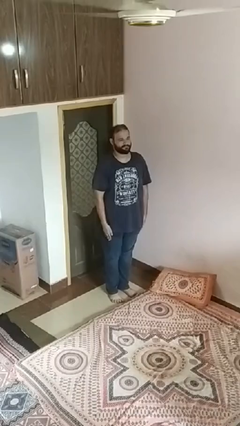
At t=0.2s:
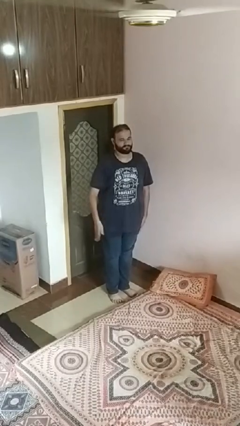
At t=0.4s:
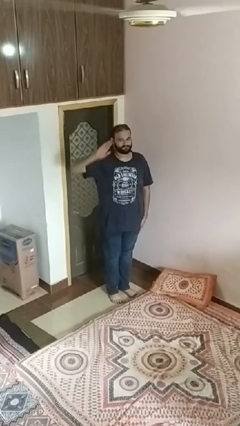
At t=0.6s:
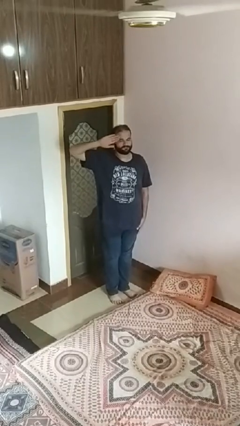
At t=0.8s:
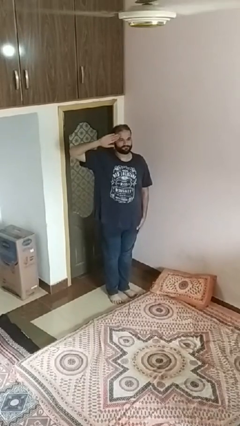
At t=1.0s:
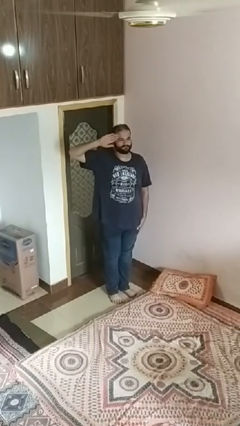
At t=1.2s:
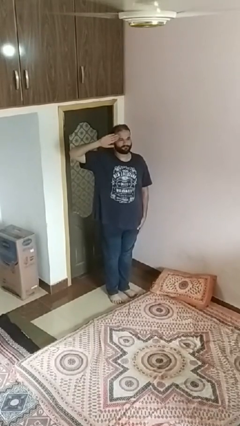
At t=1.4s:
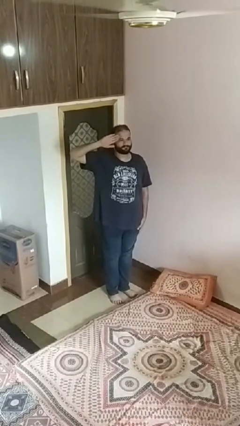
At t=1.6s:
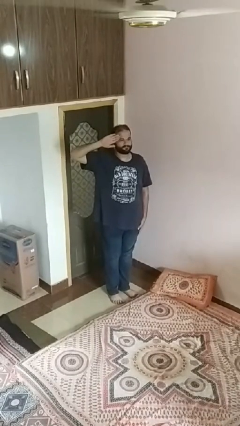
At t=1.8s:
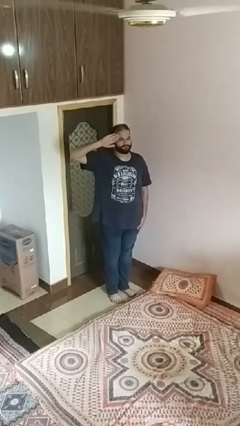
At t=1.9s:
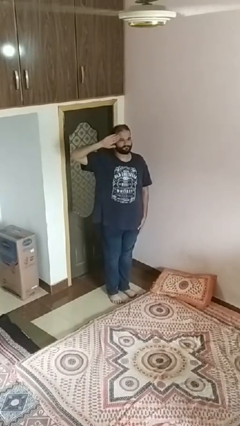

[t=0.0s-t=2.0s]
person salutes

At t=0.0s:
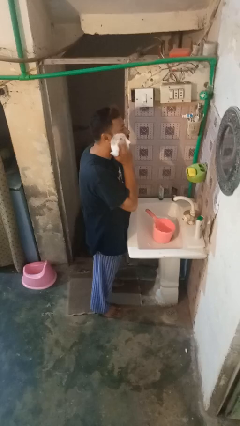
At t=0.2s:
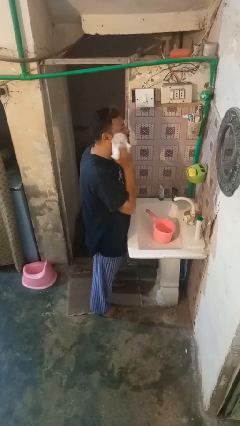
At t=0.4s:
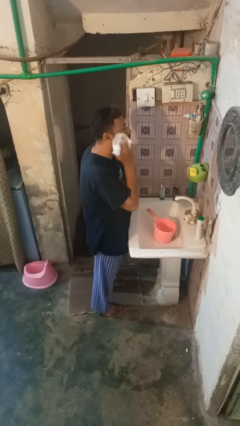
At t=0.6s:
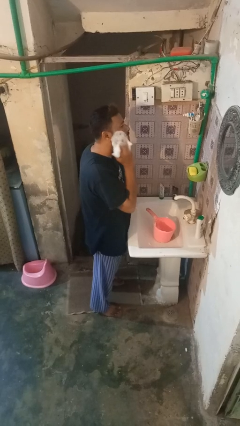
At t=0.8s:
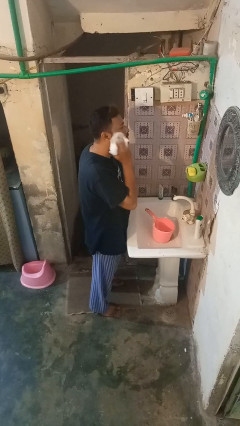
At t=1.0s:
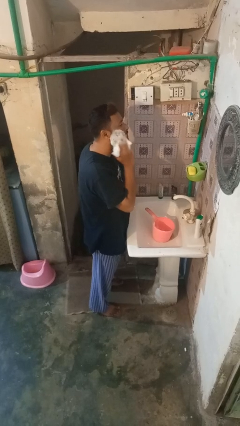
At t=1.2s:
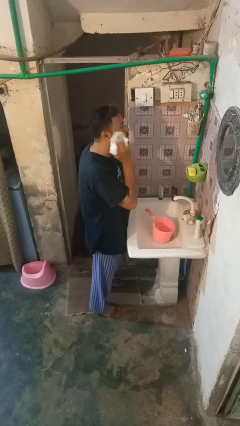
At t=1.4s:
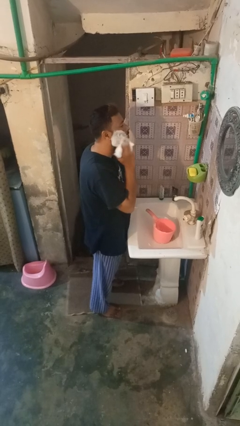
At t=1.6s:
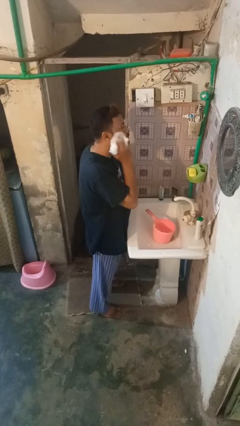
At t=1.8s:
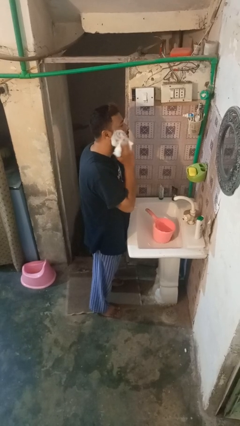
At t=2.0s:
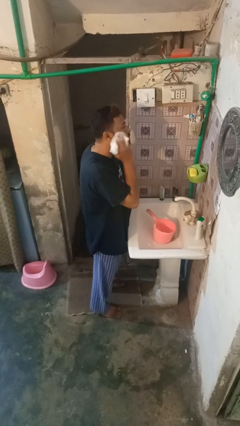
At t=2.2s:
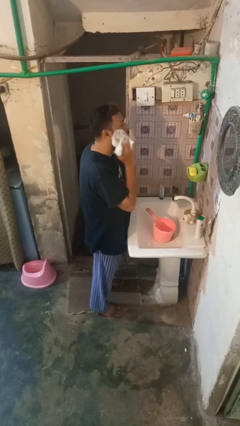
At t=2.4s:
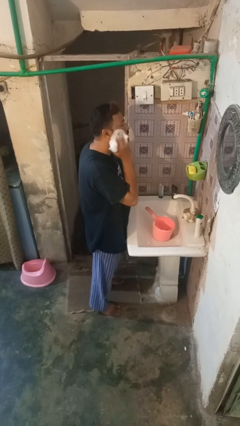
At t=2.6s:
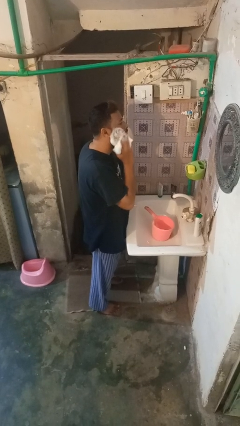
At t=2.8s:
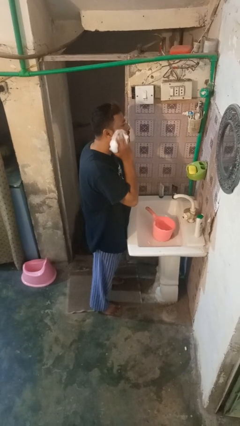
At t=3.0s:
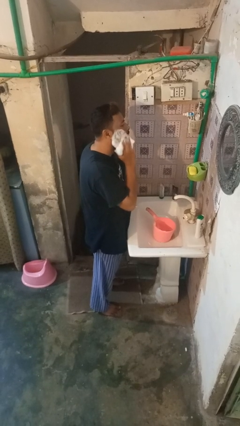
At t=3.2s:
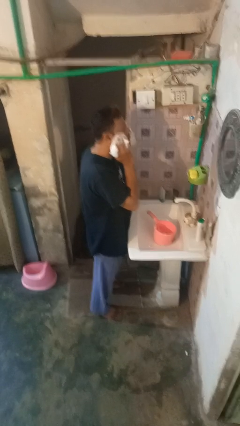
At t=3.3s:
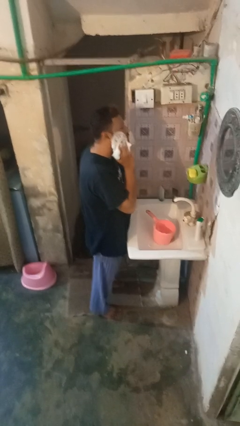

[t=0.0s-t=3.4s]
person shaves face

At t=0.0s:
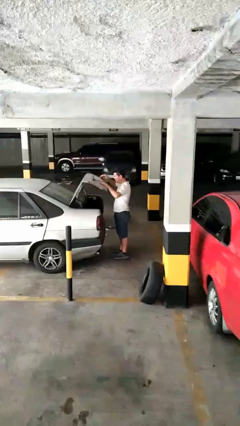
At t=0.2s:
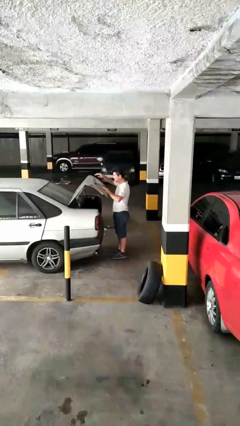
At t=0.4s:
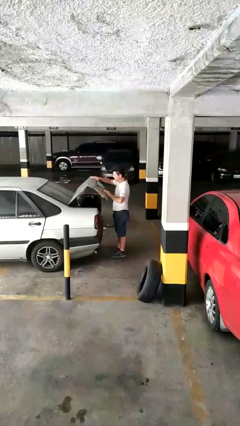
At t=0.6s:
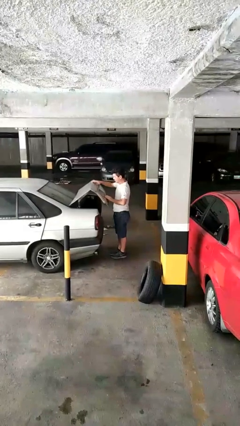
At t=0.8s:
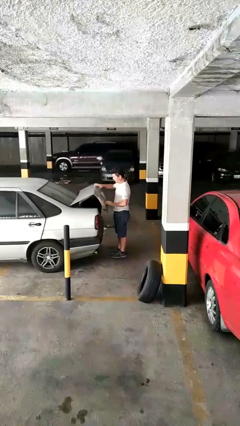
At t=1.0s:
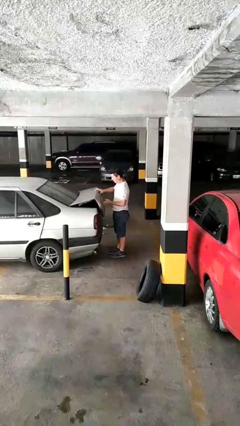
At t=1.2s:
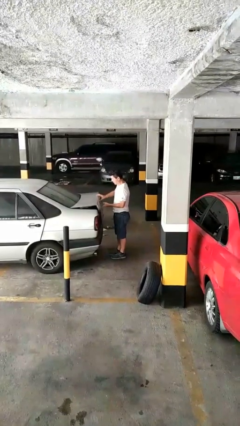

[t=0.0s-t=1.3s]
person closes car trunk

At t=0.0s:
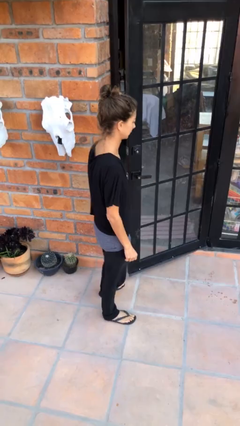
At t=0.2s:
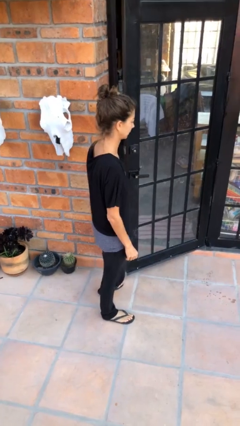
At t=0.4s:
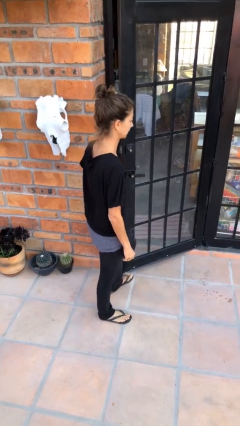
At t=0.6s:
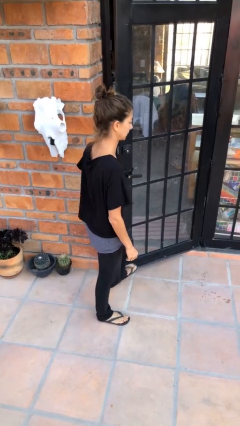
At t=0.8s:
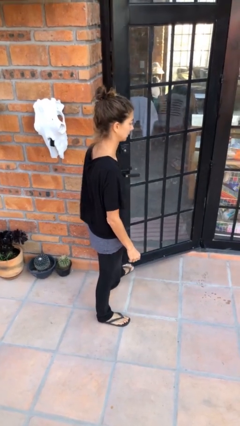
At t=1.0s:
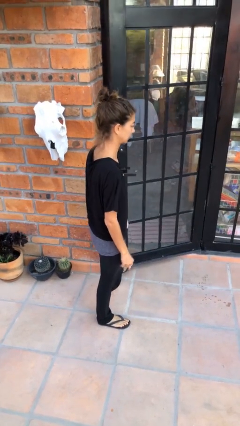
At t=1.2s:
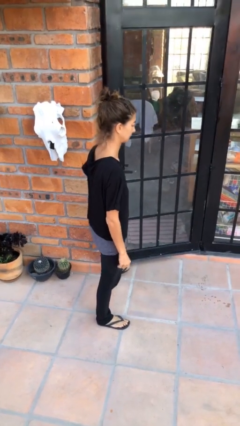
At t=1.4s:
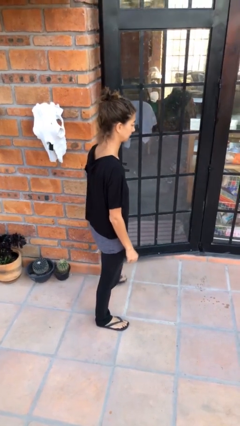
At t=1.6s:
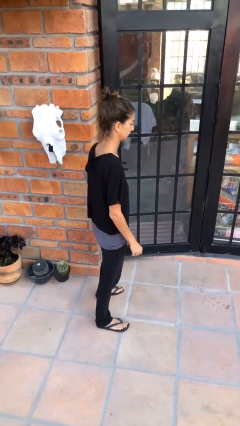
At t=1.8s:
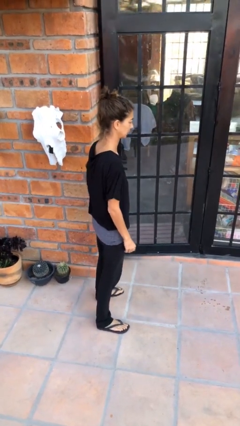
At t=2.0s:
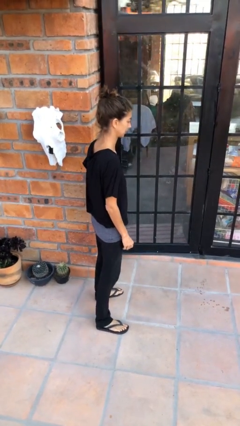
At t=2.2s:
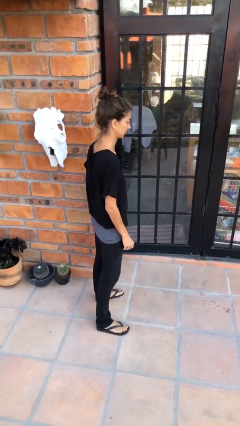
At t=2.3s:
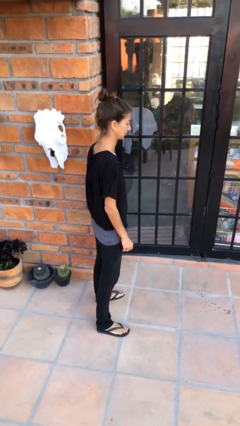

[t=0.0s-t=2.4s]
person closes door with foot

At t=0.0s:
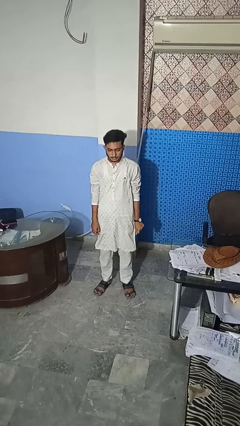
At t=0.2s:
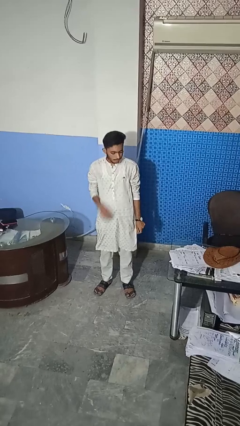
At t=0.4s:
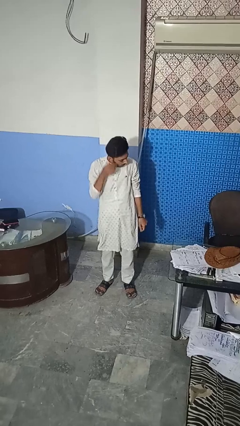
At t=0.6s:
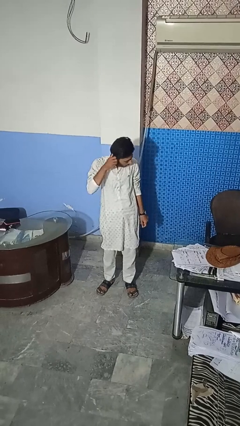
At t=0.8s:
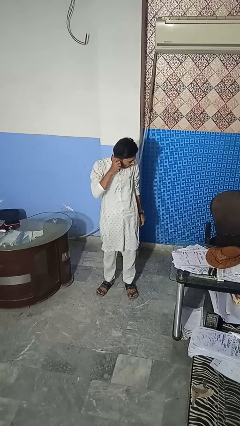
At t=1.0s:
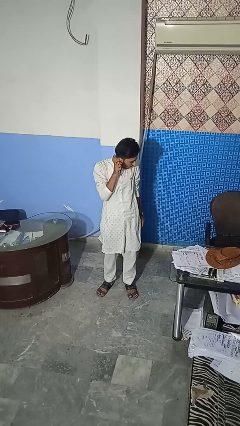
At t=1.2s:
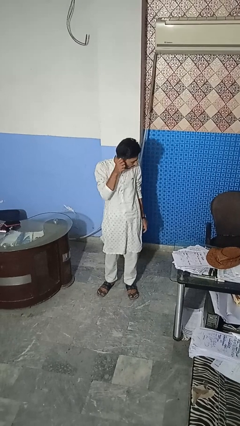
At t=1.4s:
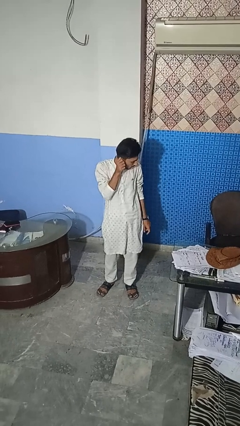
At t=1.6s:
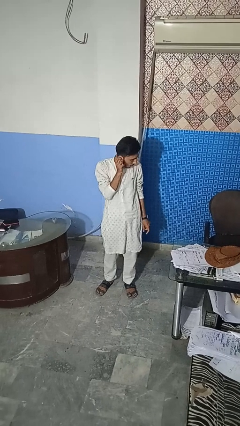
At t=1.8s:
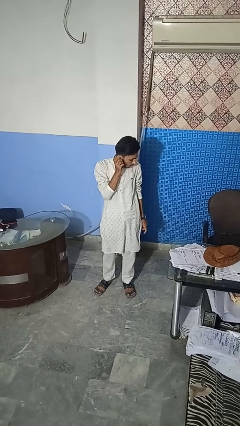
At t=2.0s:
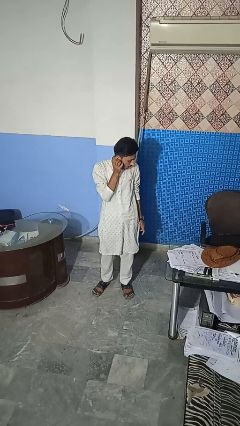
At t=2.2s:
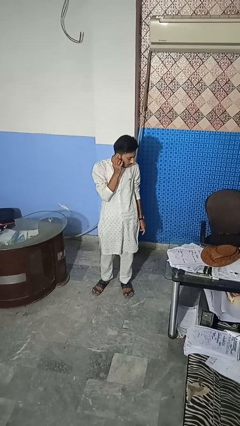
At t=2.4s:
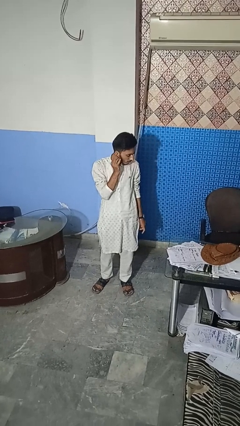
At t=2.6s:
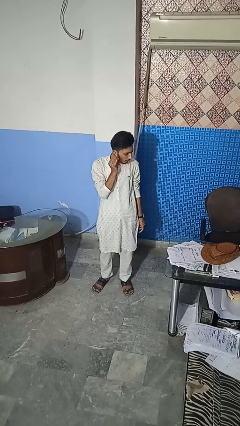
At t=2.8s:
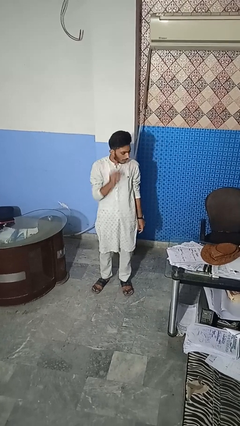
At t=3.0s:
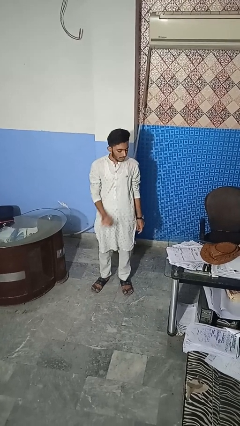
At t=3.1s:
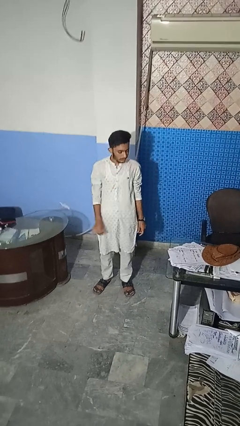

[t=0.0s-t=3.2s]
person touches earlobe

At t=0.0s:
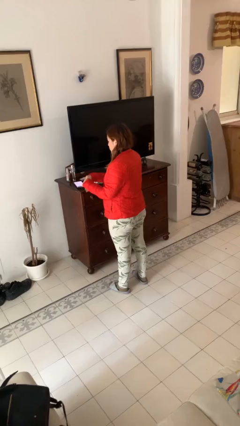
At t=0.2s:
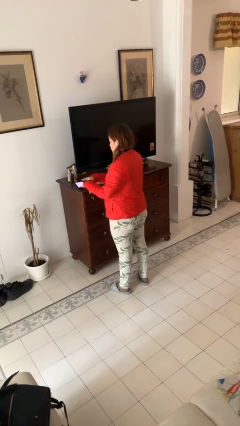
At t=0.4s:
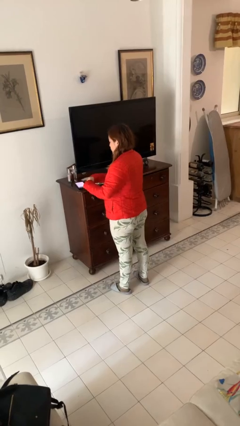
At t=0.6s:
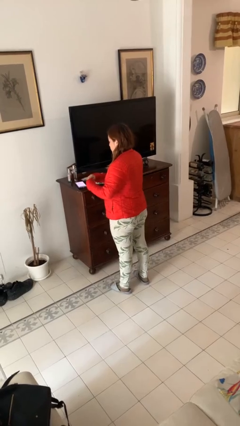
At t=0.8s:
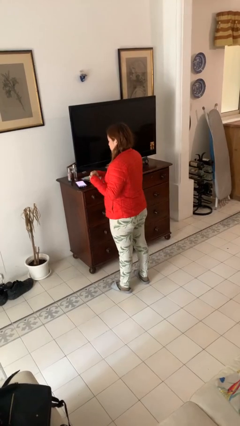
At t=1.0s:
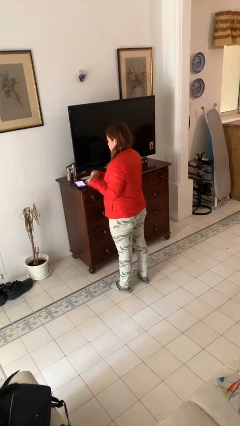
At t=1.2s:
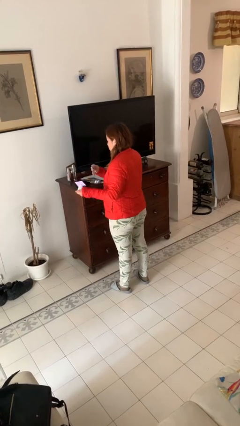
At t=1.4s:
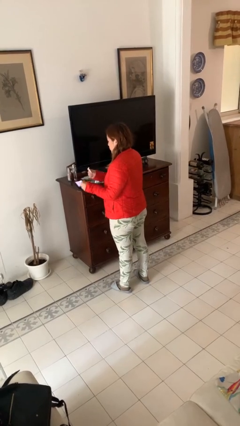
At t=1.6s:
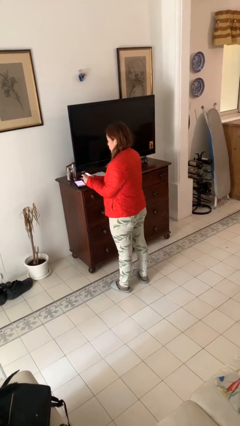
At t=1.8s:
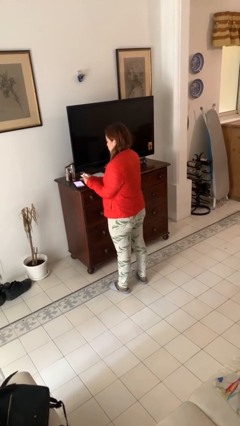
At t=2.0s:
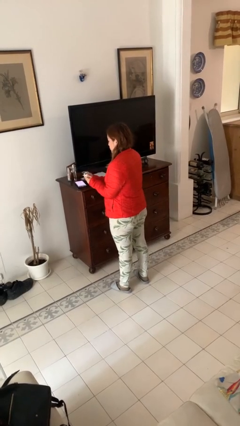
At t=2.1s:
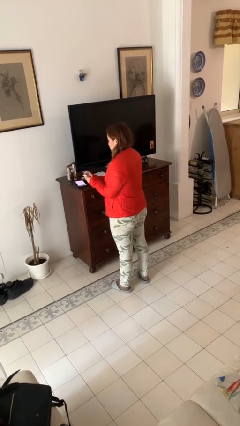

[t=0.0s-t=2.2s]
person tears paper

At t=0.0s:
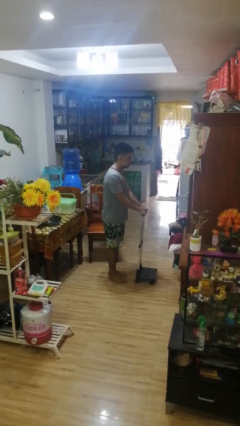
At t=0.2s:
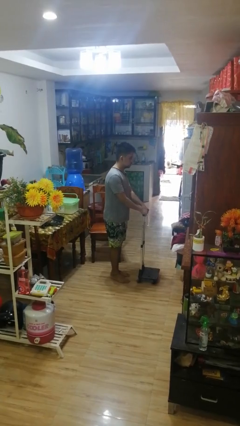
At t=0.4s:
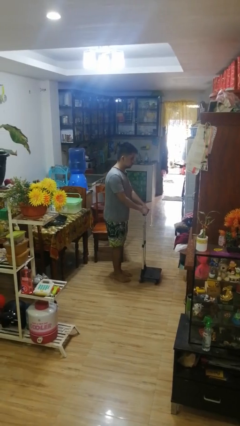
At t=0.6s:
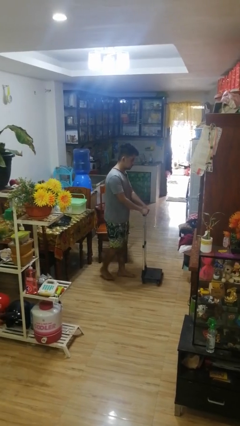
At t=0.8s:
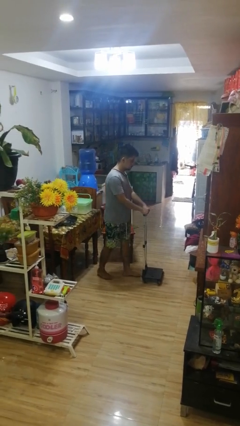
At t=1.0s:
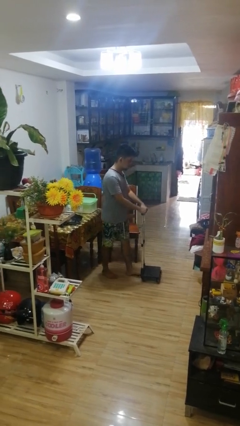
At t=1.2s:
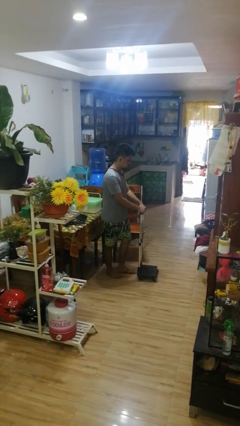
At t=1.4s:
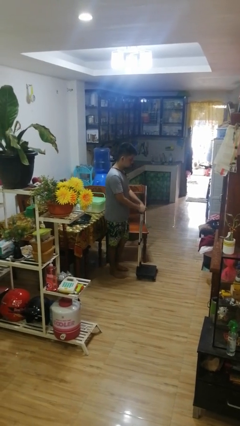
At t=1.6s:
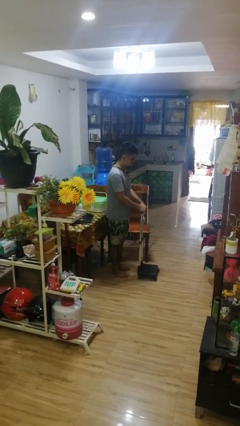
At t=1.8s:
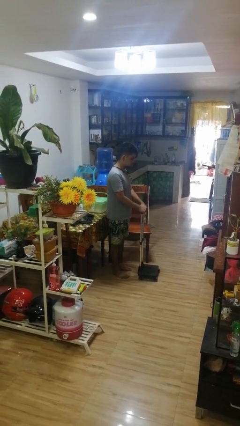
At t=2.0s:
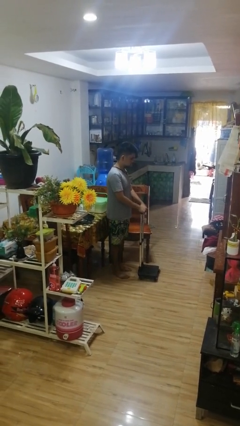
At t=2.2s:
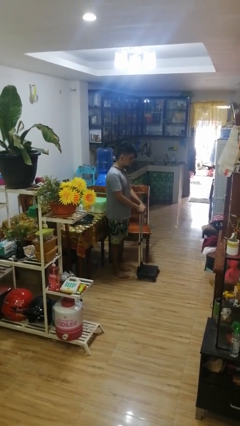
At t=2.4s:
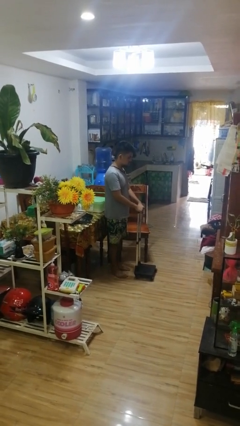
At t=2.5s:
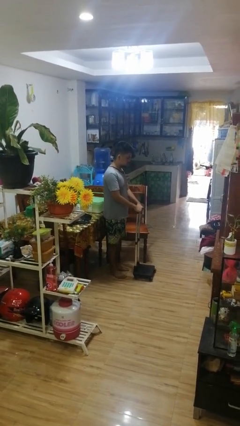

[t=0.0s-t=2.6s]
person pulls wheeled cart

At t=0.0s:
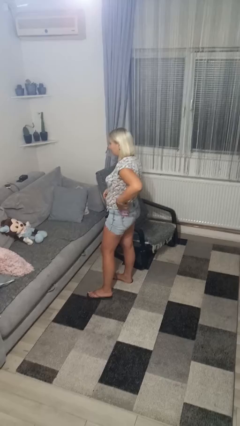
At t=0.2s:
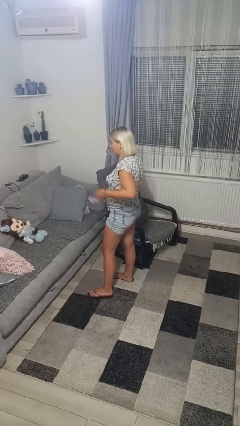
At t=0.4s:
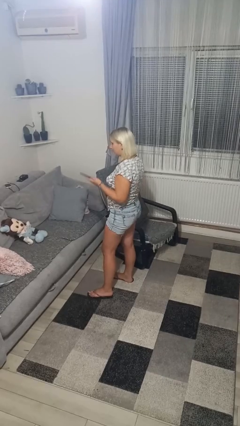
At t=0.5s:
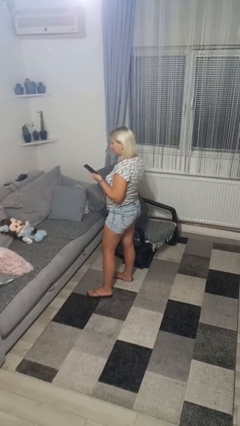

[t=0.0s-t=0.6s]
person takes phone from pocket
